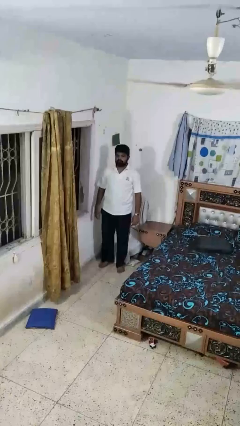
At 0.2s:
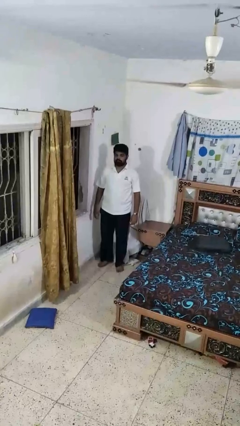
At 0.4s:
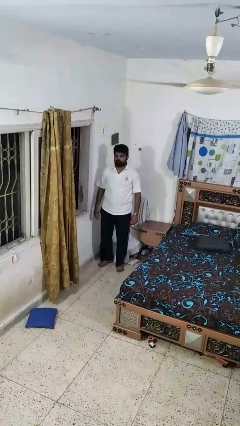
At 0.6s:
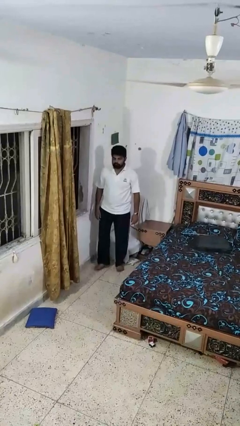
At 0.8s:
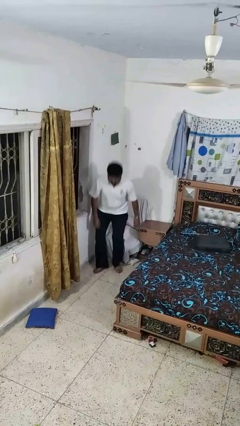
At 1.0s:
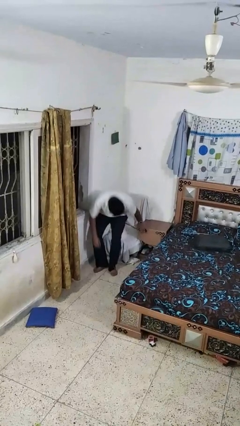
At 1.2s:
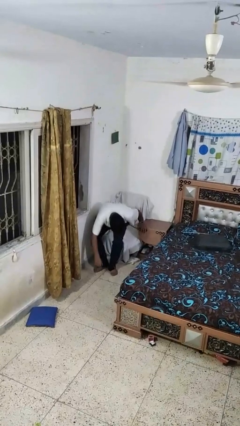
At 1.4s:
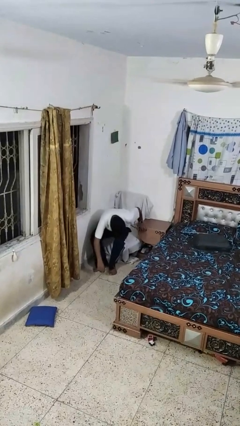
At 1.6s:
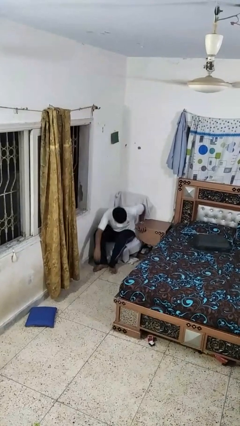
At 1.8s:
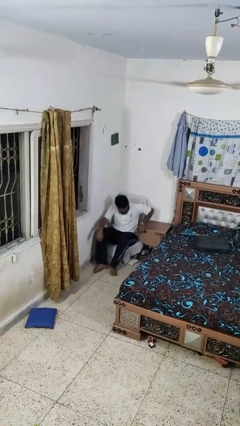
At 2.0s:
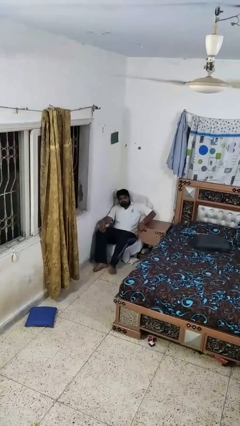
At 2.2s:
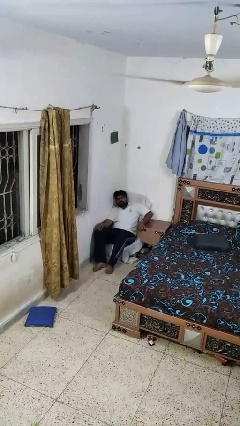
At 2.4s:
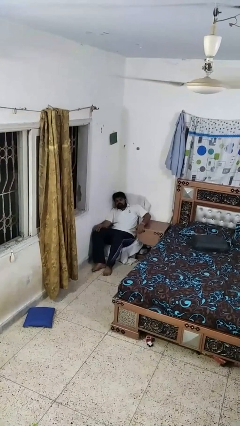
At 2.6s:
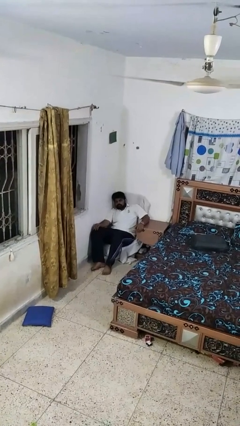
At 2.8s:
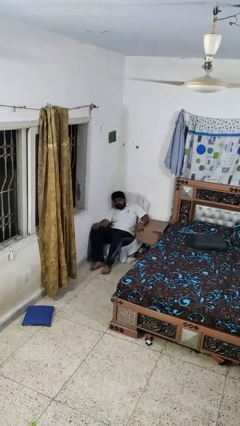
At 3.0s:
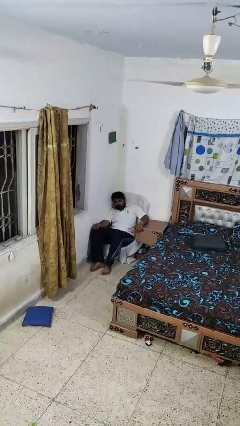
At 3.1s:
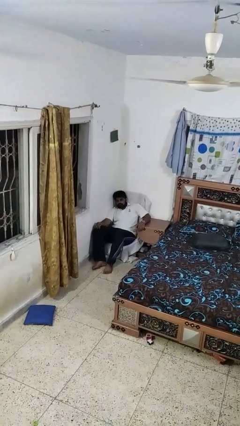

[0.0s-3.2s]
person lies down on couch

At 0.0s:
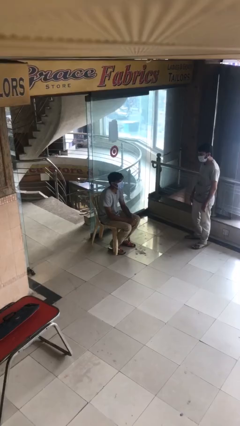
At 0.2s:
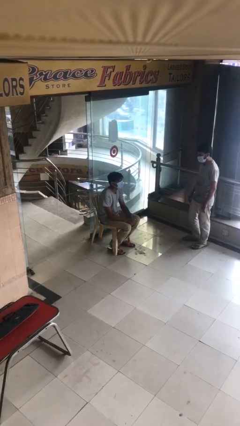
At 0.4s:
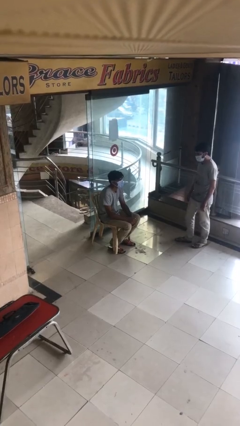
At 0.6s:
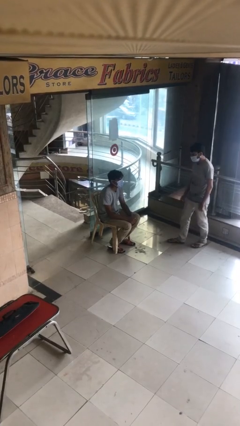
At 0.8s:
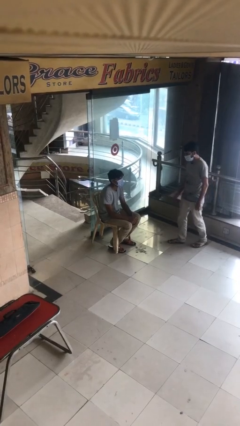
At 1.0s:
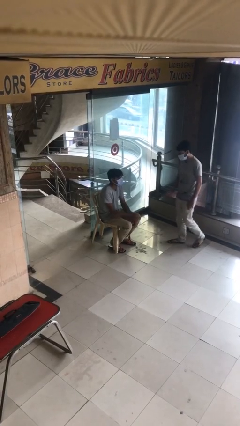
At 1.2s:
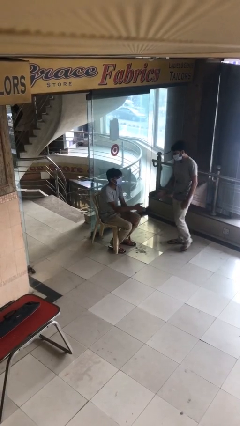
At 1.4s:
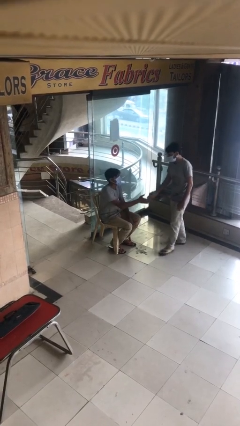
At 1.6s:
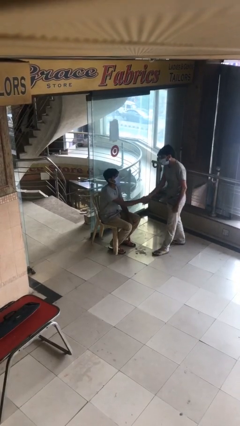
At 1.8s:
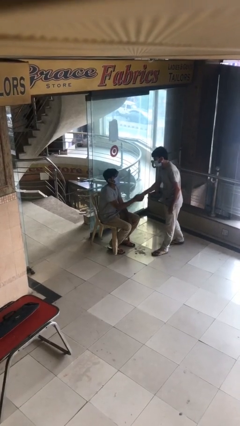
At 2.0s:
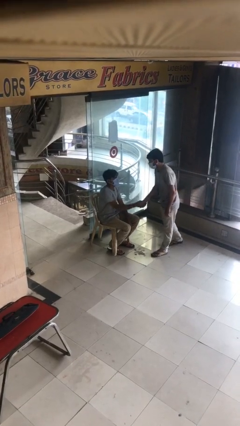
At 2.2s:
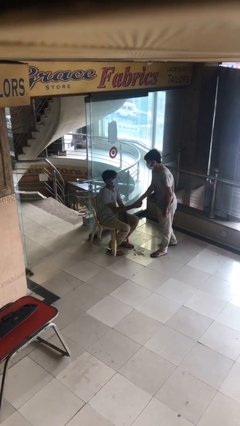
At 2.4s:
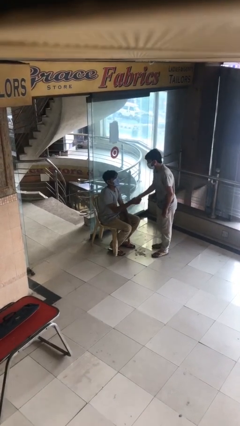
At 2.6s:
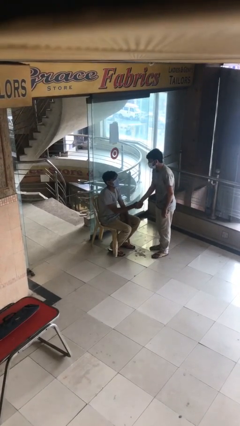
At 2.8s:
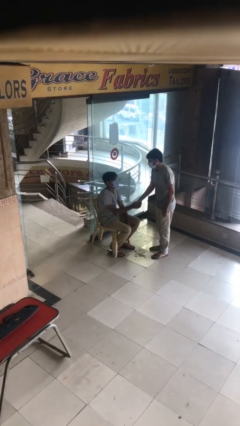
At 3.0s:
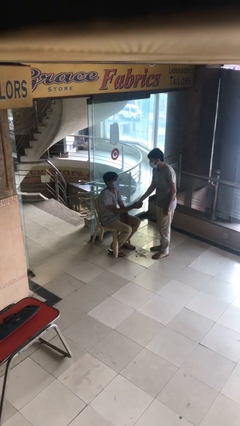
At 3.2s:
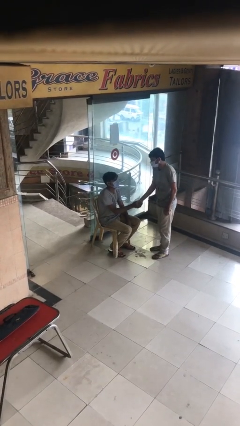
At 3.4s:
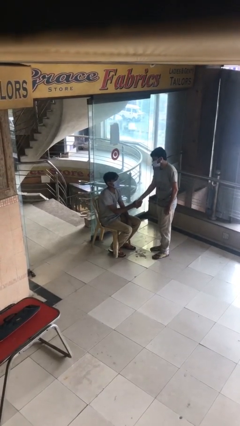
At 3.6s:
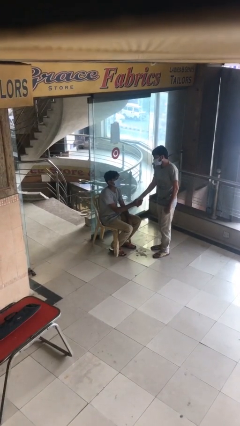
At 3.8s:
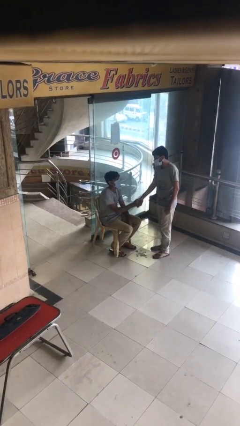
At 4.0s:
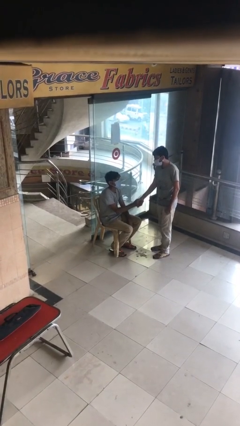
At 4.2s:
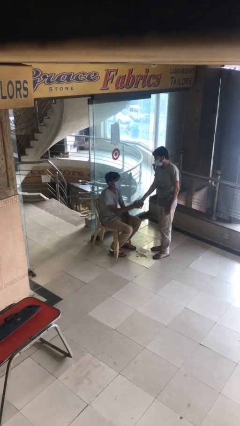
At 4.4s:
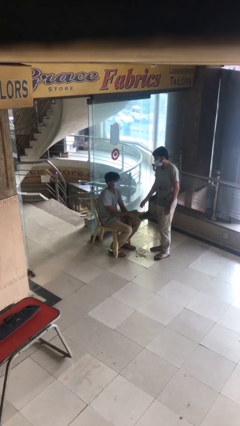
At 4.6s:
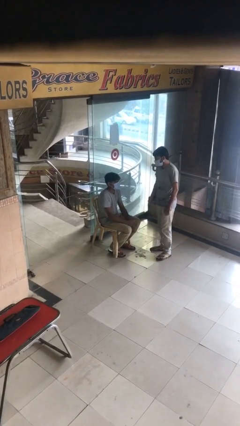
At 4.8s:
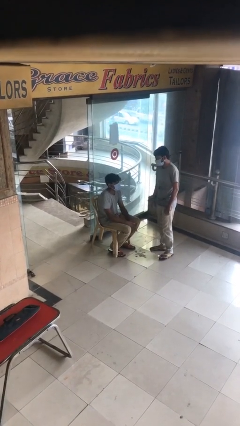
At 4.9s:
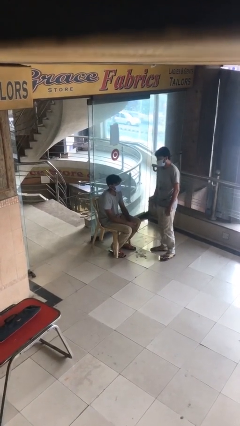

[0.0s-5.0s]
person shakes hand

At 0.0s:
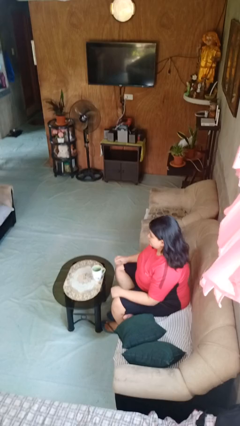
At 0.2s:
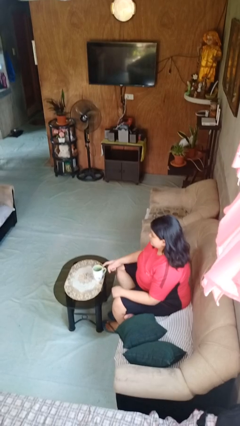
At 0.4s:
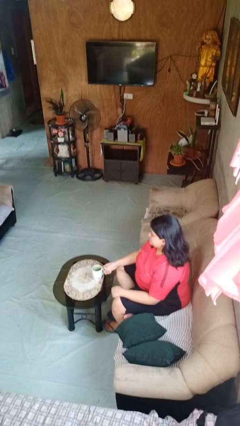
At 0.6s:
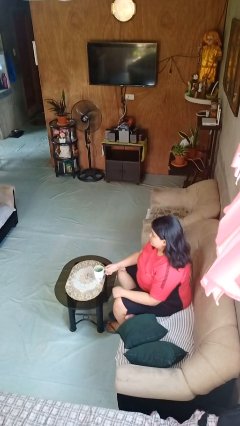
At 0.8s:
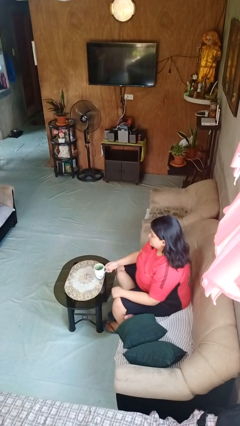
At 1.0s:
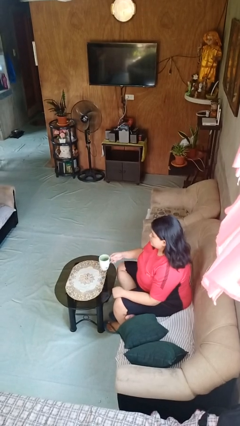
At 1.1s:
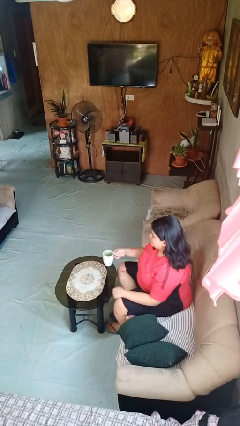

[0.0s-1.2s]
person picks up object from table

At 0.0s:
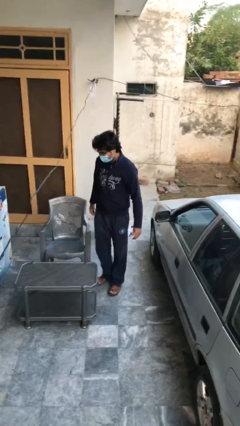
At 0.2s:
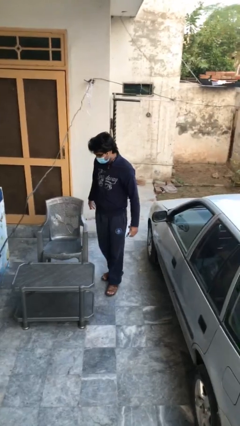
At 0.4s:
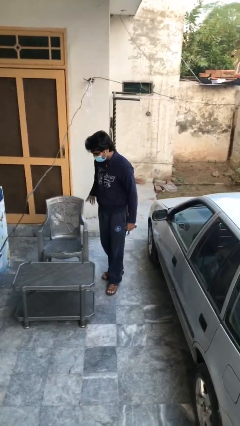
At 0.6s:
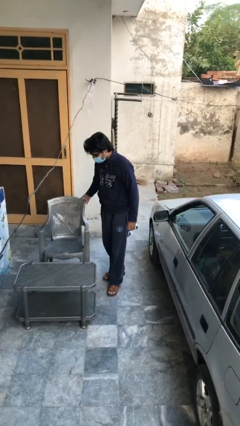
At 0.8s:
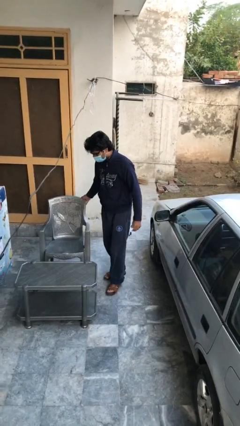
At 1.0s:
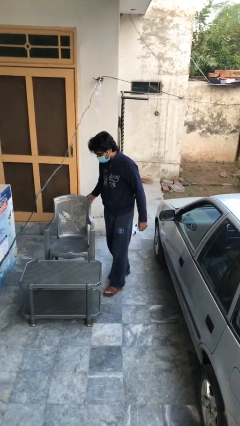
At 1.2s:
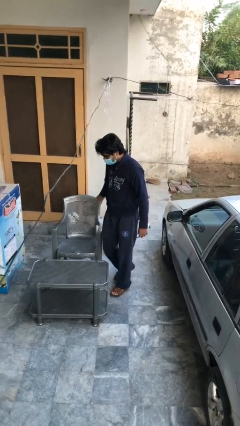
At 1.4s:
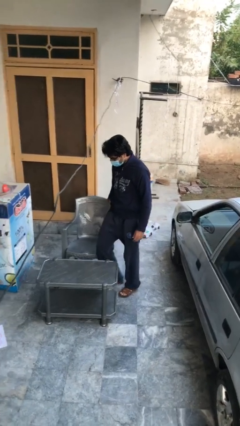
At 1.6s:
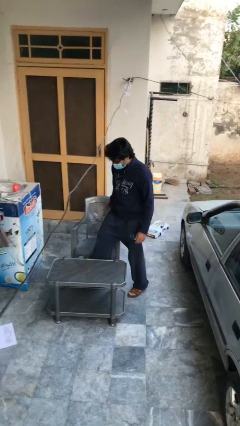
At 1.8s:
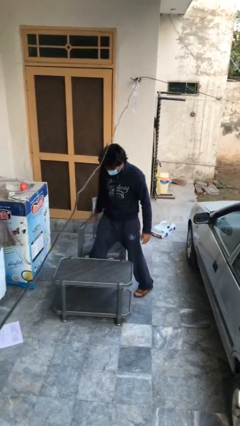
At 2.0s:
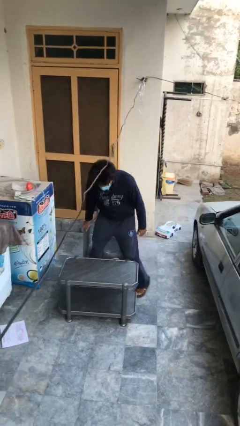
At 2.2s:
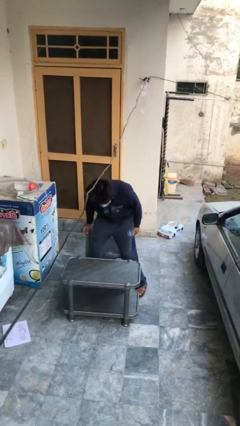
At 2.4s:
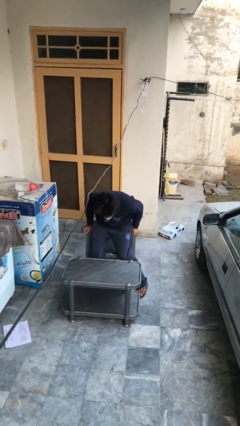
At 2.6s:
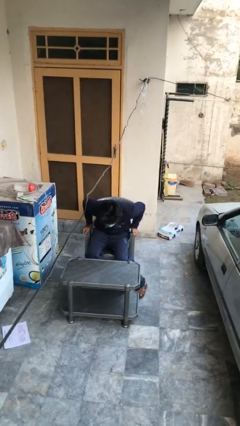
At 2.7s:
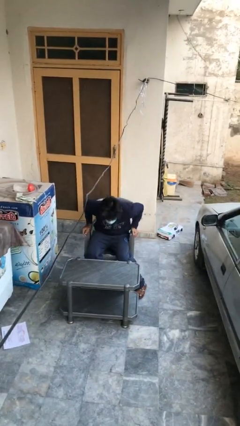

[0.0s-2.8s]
person sits down

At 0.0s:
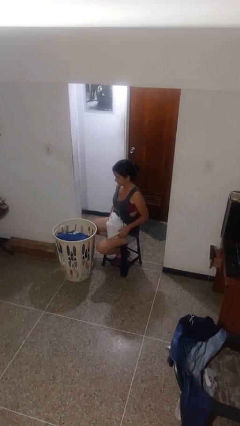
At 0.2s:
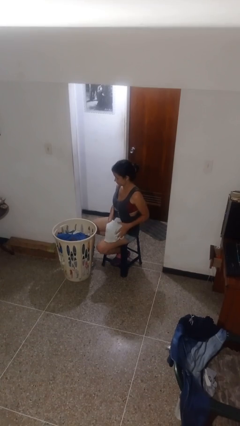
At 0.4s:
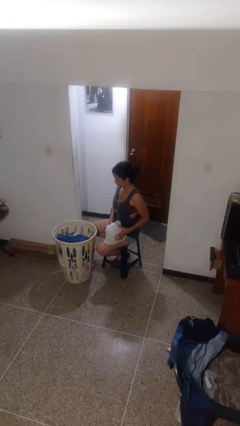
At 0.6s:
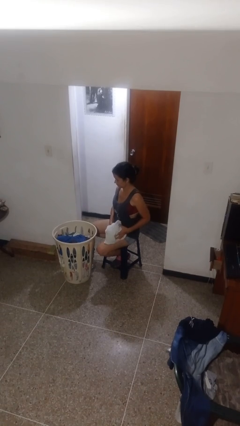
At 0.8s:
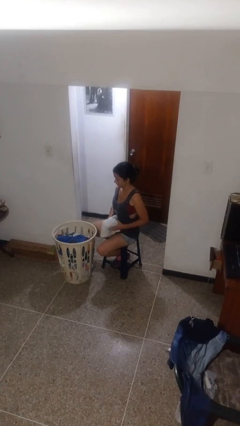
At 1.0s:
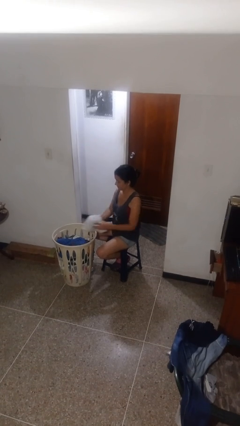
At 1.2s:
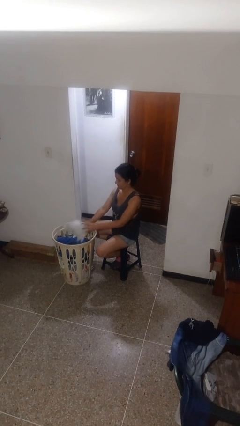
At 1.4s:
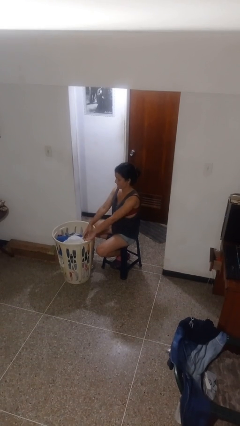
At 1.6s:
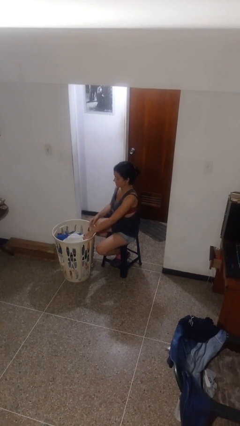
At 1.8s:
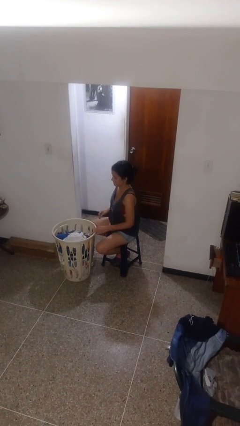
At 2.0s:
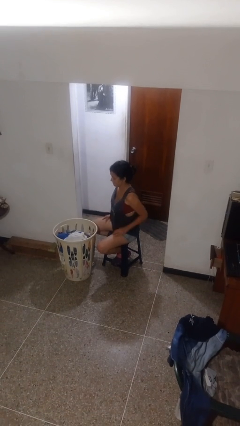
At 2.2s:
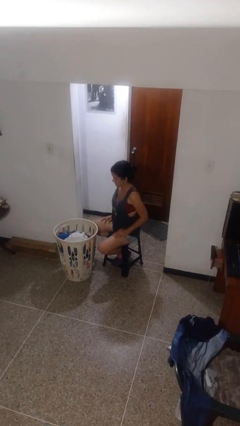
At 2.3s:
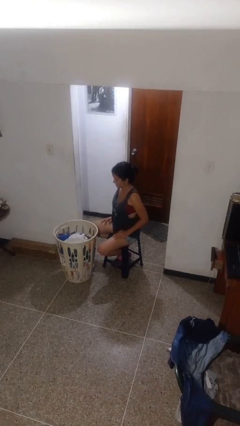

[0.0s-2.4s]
person puts object into basket

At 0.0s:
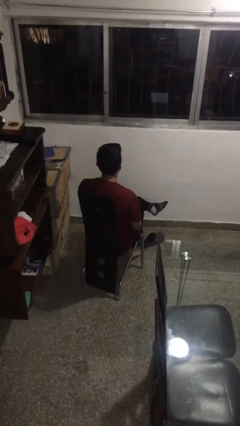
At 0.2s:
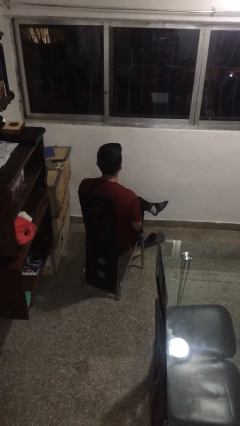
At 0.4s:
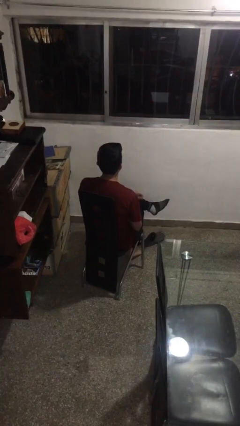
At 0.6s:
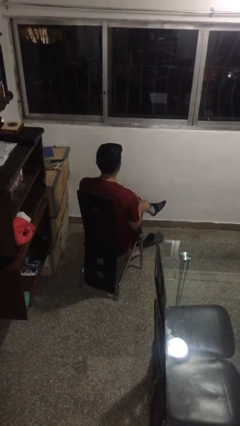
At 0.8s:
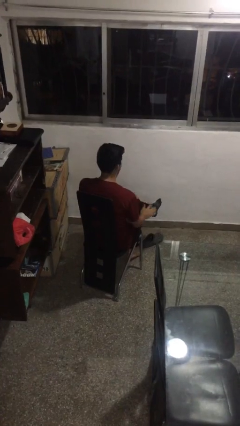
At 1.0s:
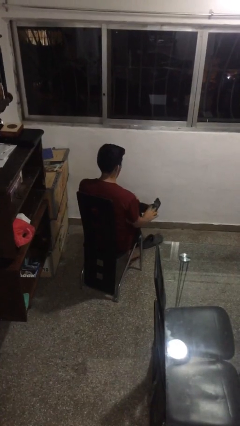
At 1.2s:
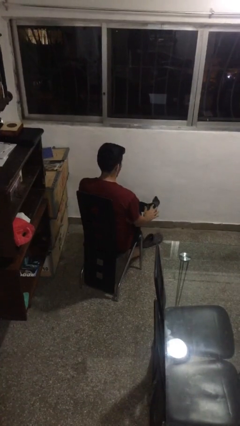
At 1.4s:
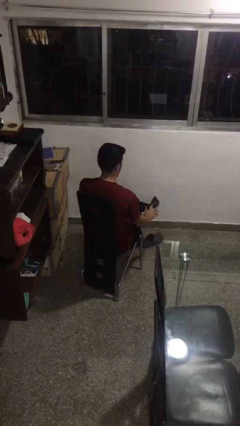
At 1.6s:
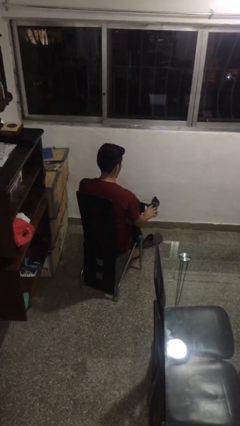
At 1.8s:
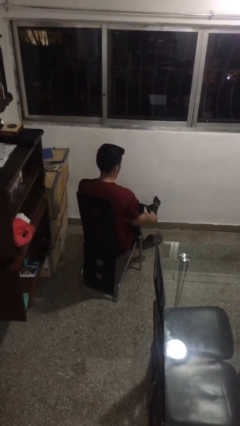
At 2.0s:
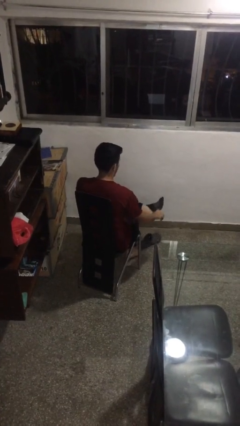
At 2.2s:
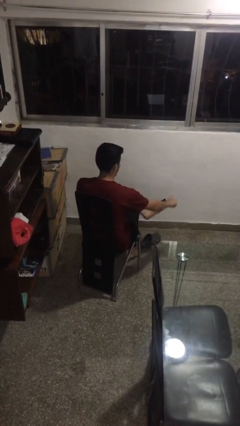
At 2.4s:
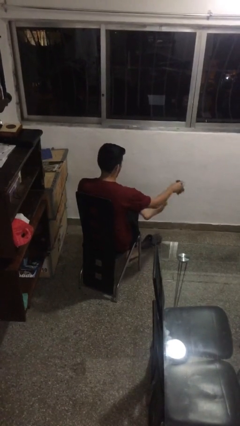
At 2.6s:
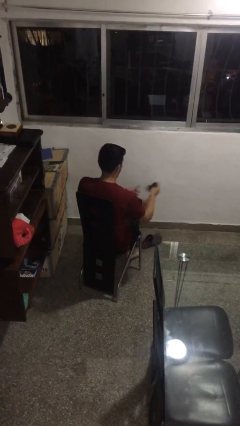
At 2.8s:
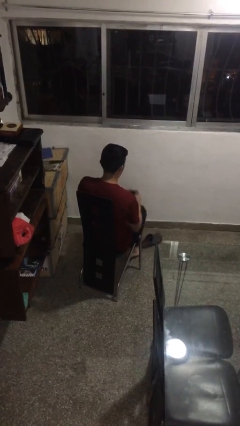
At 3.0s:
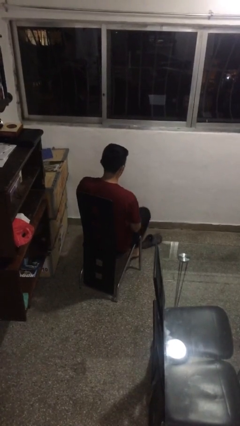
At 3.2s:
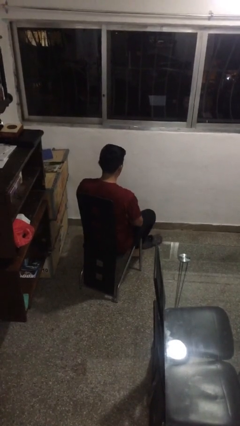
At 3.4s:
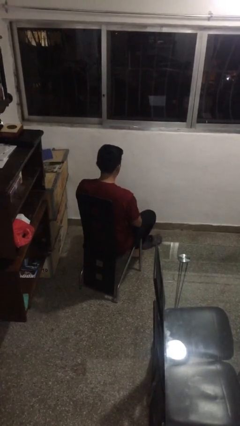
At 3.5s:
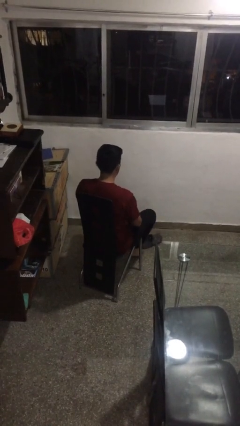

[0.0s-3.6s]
person takes off socks
